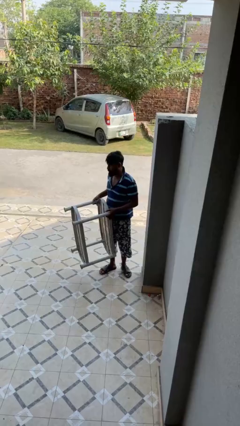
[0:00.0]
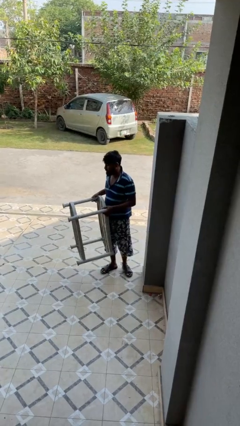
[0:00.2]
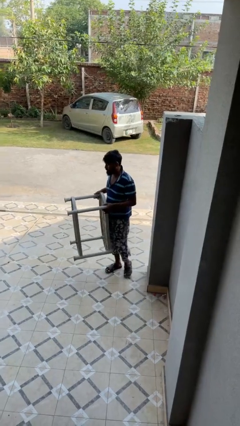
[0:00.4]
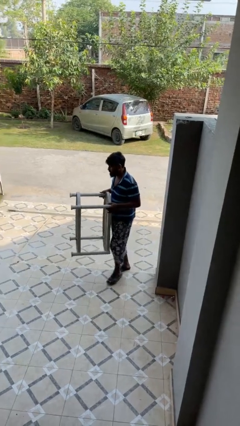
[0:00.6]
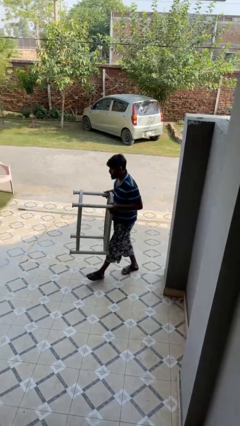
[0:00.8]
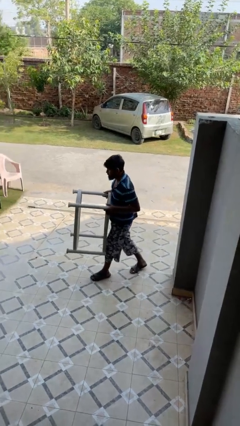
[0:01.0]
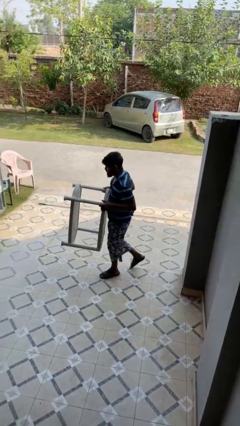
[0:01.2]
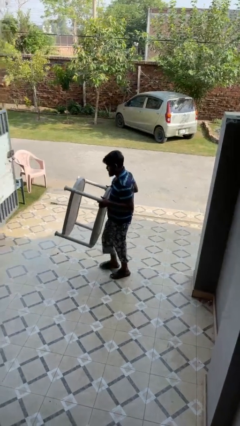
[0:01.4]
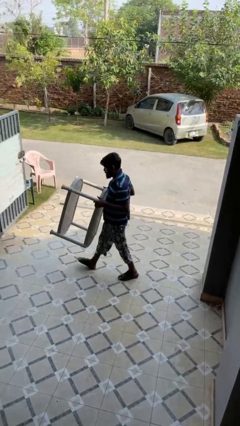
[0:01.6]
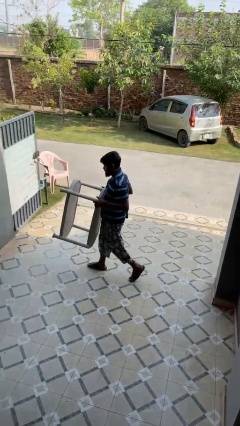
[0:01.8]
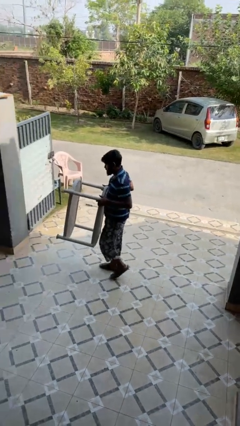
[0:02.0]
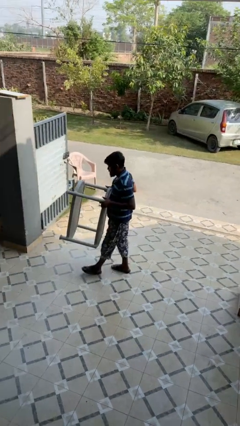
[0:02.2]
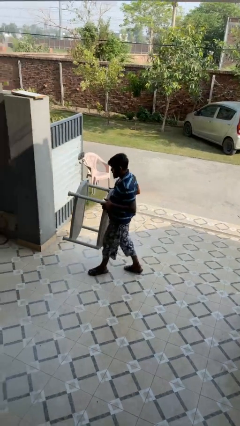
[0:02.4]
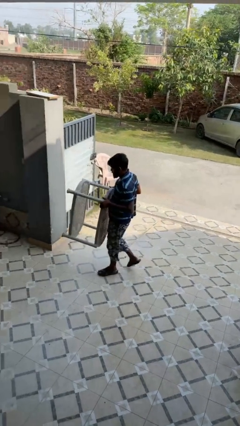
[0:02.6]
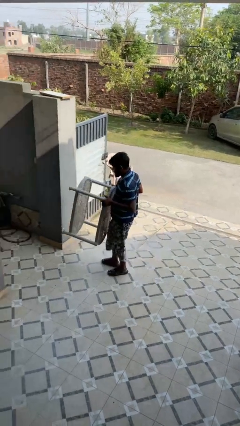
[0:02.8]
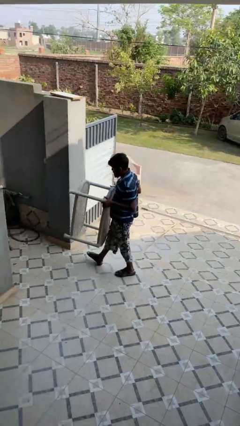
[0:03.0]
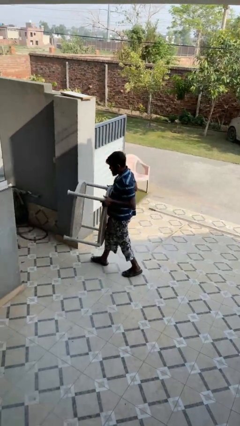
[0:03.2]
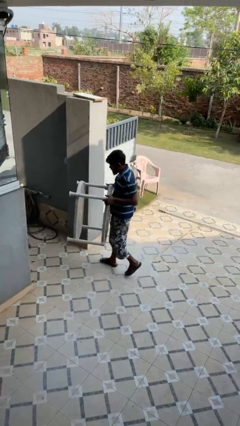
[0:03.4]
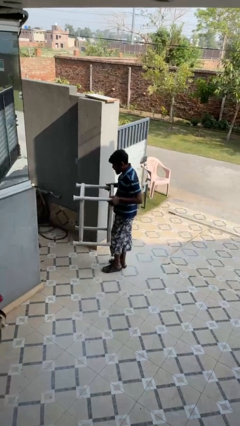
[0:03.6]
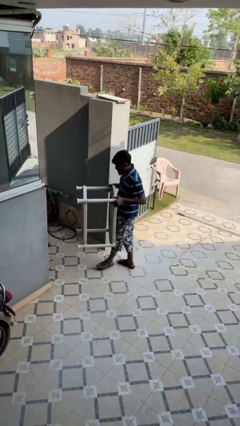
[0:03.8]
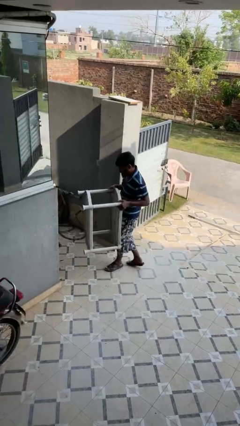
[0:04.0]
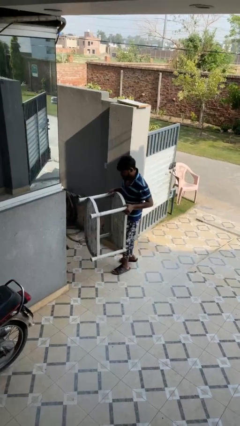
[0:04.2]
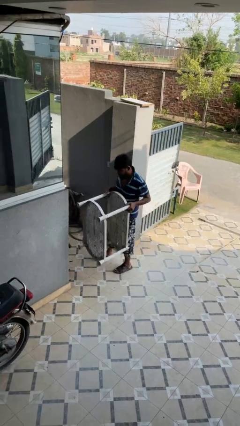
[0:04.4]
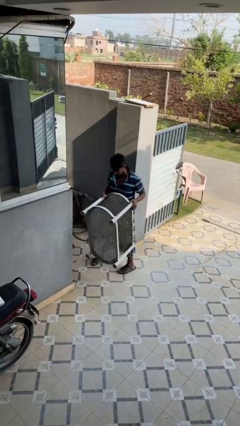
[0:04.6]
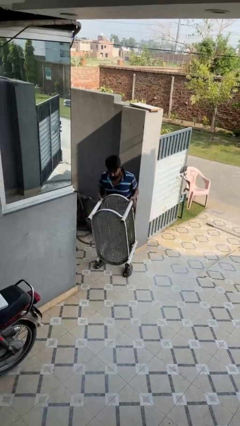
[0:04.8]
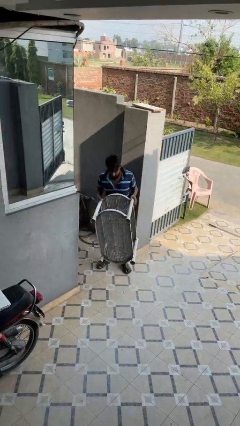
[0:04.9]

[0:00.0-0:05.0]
person carries furniture

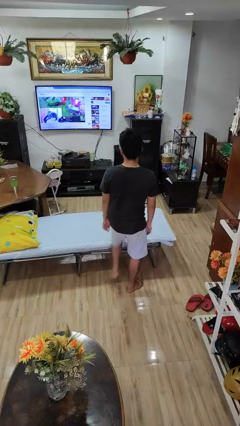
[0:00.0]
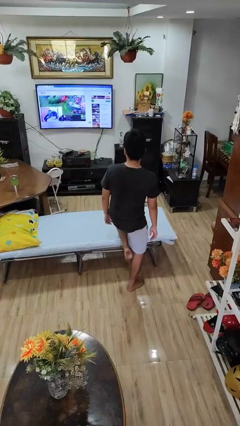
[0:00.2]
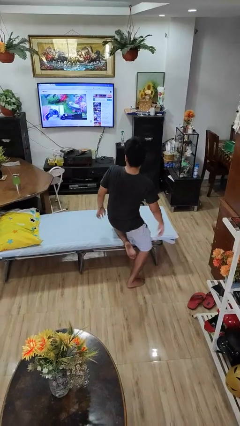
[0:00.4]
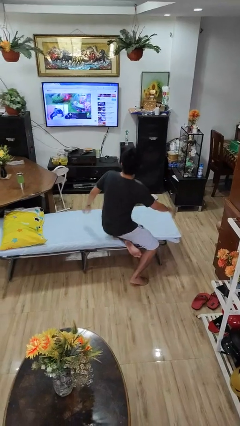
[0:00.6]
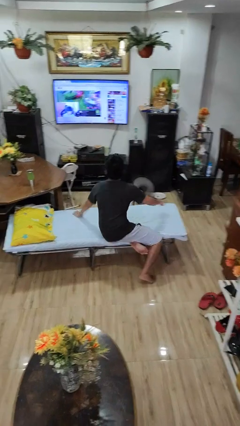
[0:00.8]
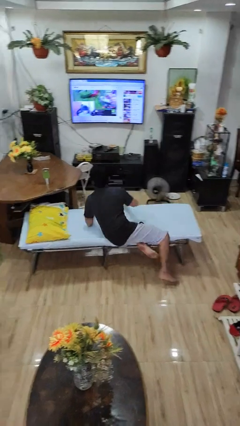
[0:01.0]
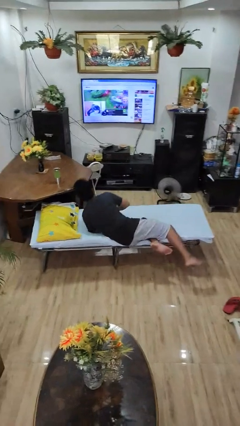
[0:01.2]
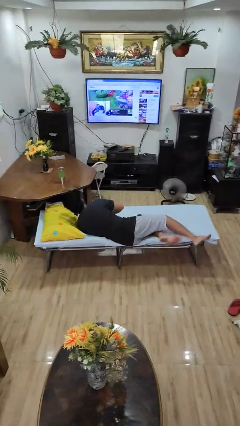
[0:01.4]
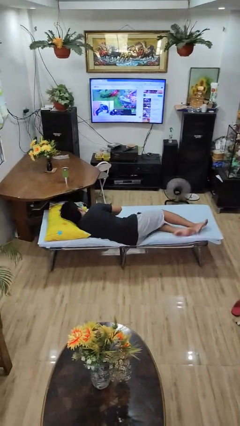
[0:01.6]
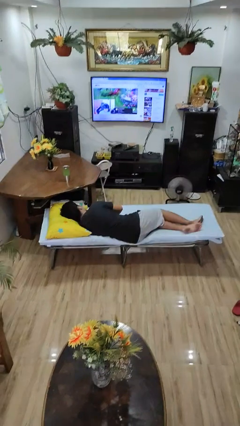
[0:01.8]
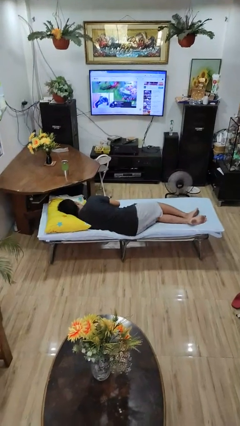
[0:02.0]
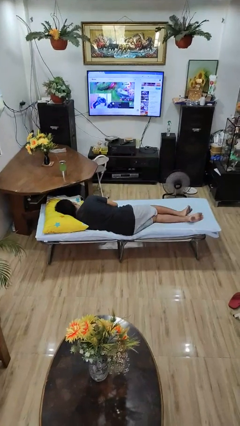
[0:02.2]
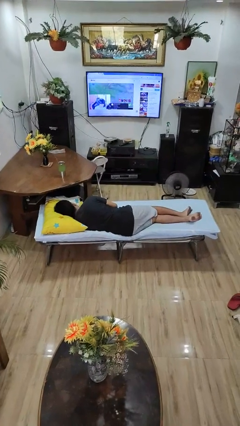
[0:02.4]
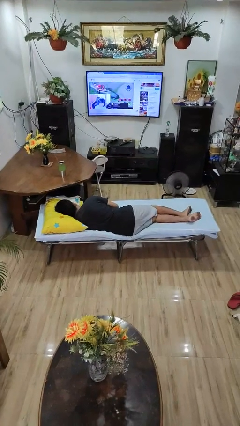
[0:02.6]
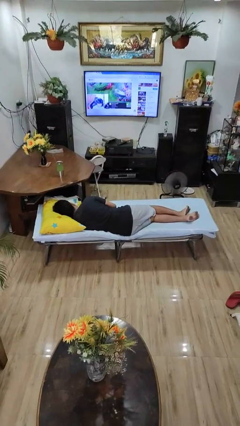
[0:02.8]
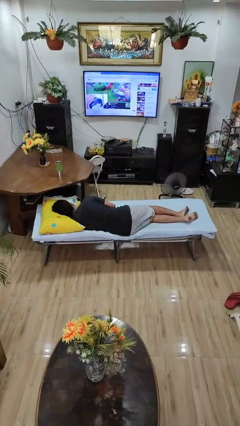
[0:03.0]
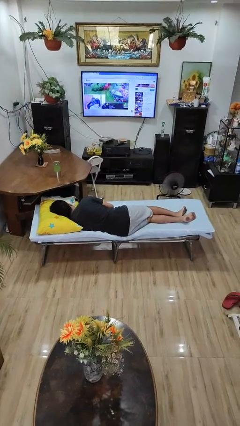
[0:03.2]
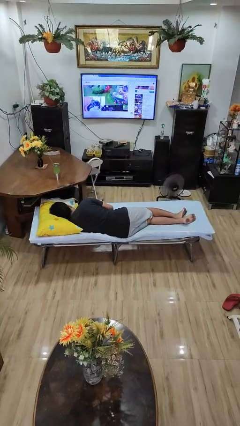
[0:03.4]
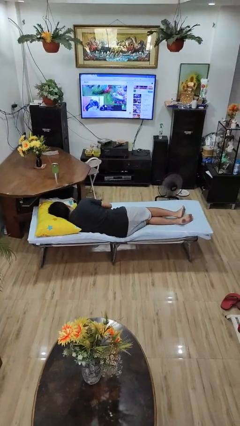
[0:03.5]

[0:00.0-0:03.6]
person lies down on bed

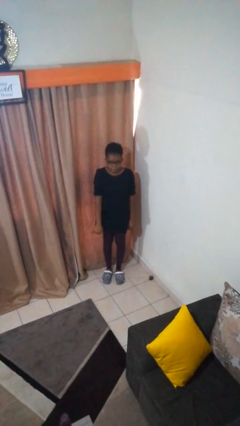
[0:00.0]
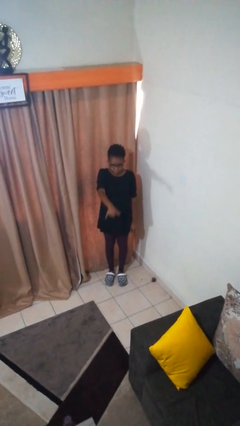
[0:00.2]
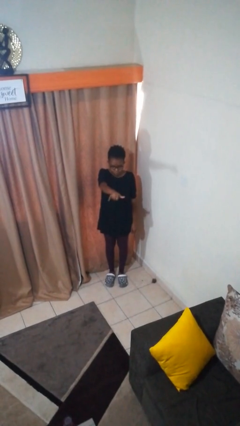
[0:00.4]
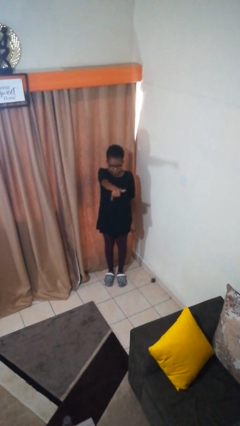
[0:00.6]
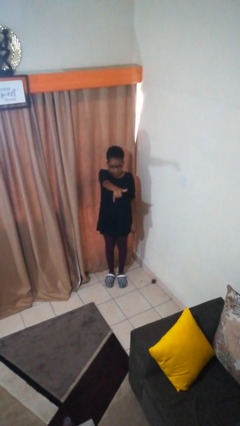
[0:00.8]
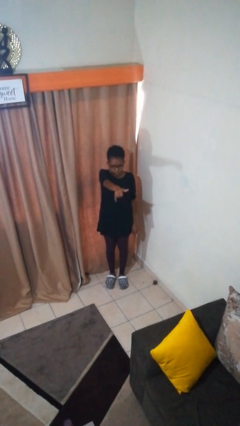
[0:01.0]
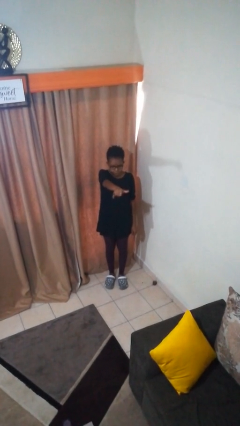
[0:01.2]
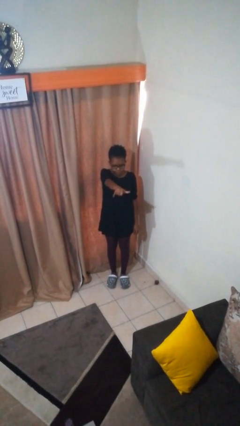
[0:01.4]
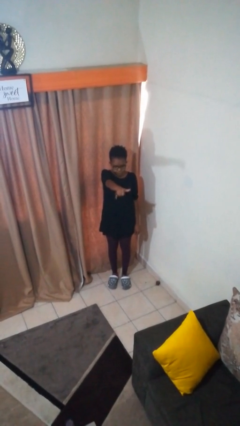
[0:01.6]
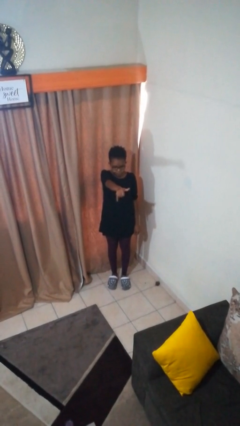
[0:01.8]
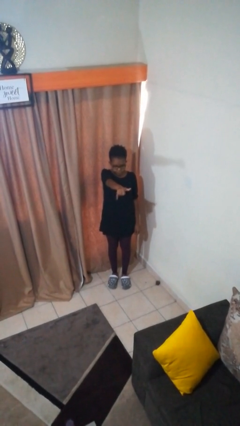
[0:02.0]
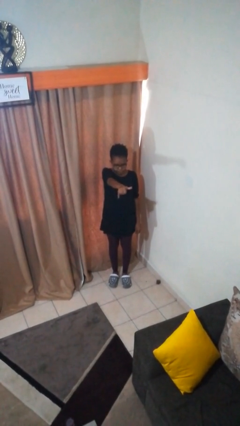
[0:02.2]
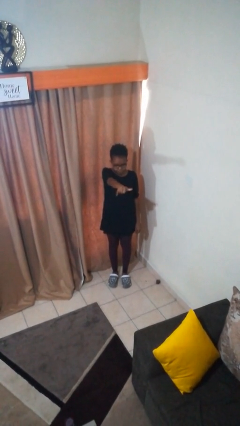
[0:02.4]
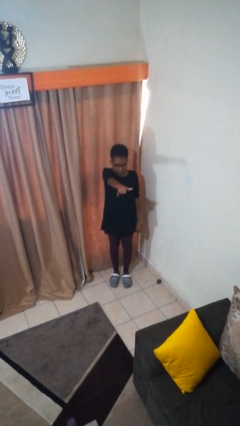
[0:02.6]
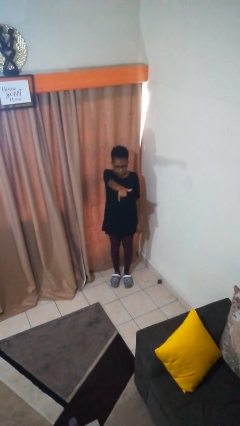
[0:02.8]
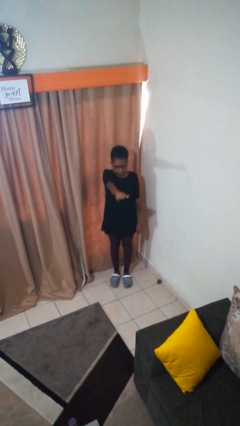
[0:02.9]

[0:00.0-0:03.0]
person gestures hang loose

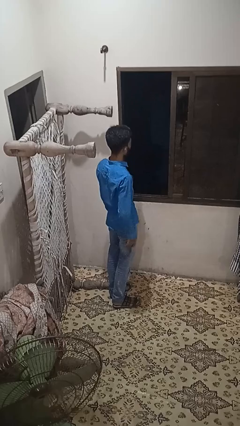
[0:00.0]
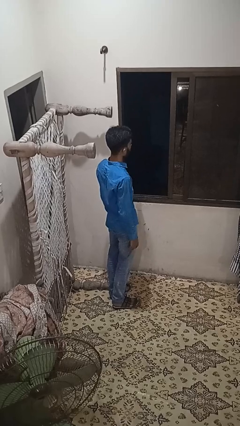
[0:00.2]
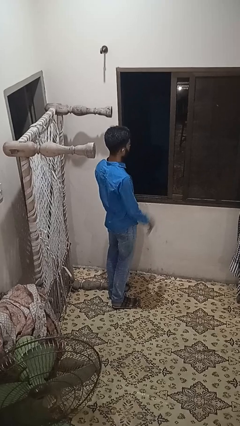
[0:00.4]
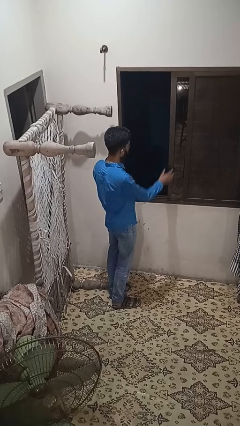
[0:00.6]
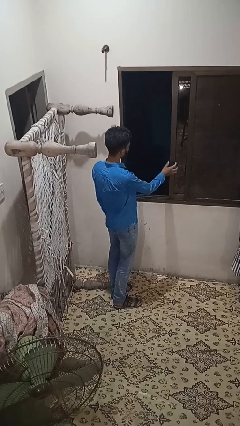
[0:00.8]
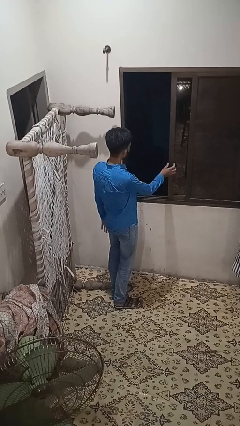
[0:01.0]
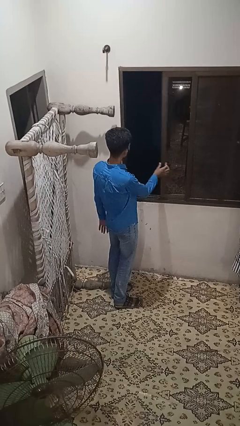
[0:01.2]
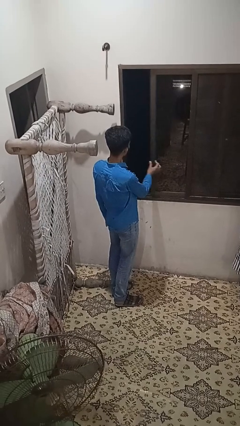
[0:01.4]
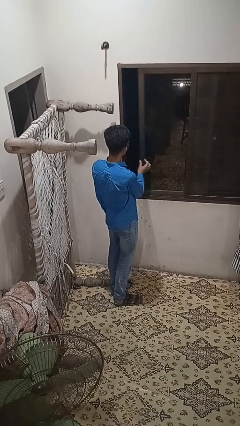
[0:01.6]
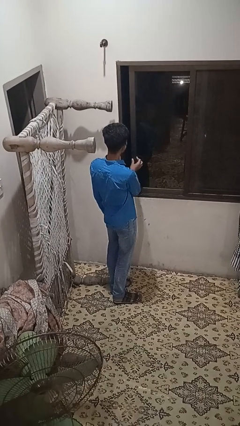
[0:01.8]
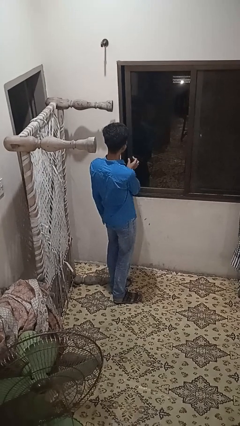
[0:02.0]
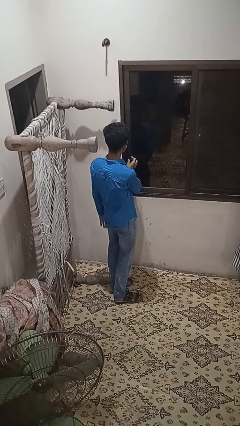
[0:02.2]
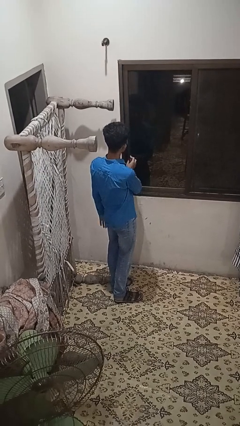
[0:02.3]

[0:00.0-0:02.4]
person closes home window

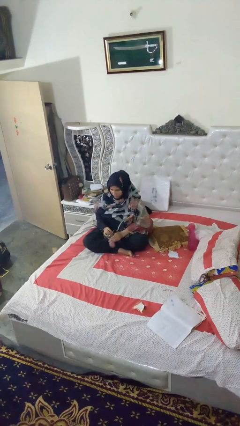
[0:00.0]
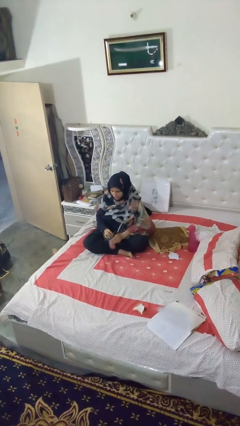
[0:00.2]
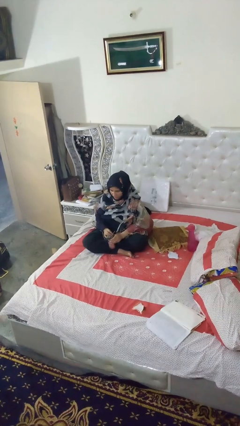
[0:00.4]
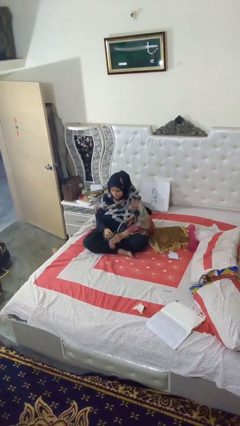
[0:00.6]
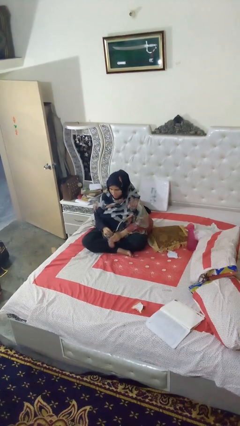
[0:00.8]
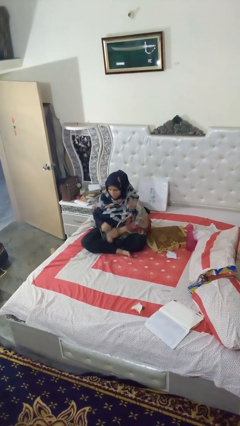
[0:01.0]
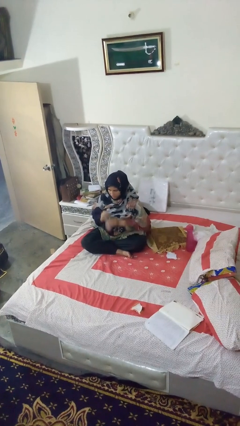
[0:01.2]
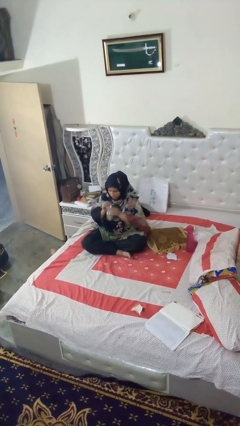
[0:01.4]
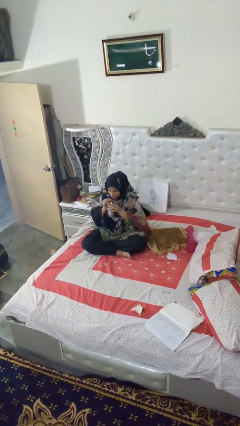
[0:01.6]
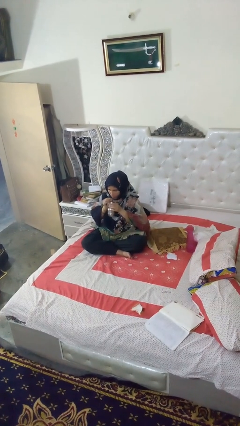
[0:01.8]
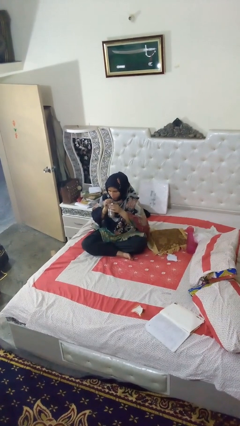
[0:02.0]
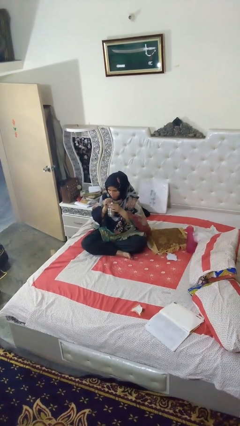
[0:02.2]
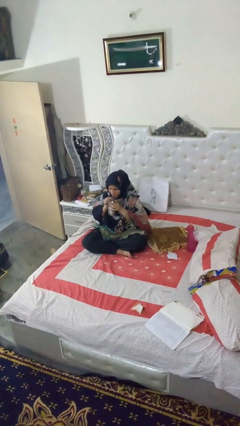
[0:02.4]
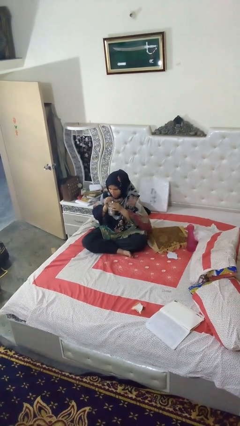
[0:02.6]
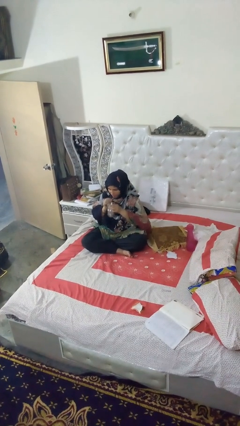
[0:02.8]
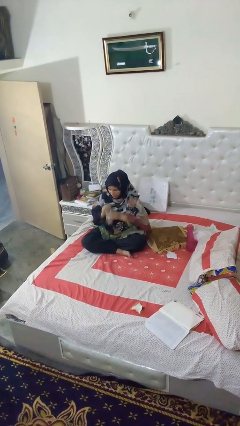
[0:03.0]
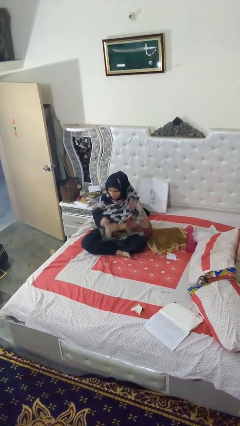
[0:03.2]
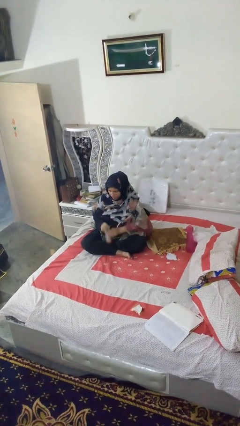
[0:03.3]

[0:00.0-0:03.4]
person drinks from straw
